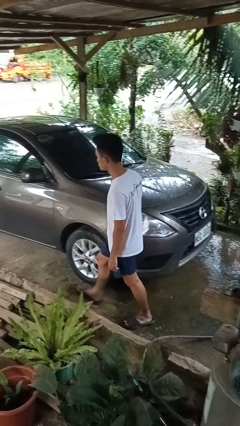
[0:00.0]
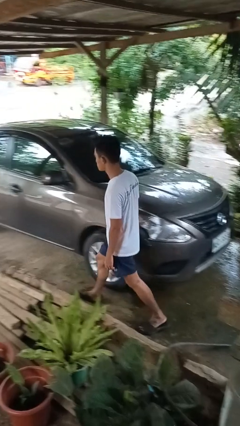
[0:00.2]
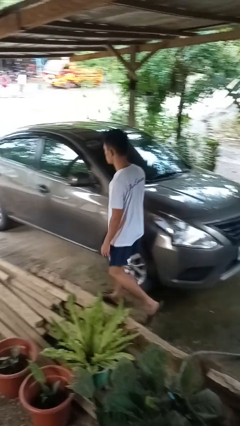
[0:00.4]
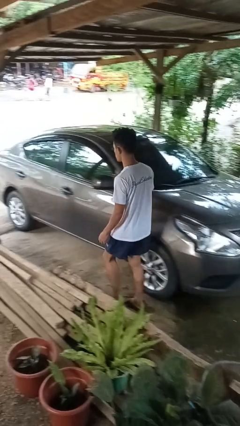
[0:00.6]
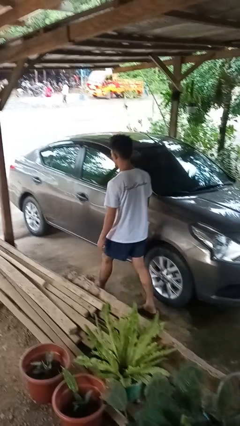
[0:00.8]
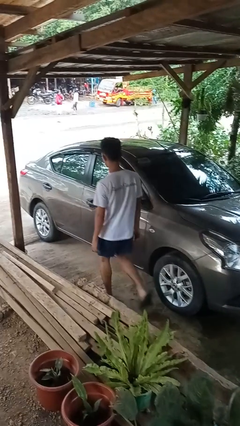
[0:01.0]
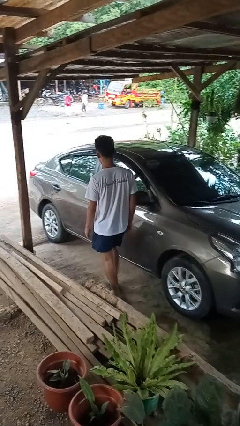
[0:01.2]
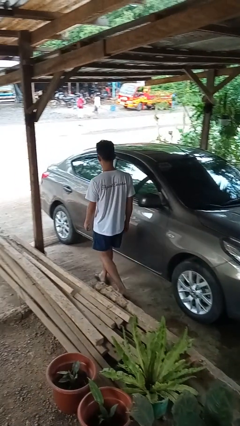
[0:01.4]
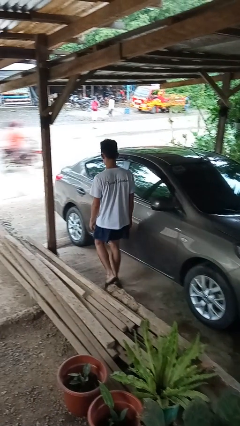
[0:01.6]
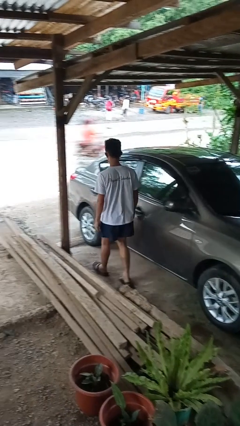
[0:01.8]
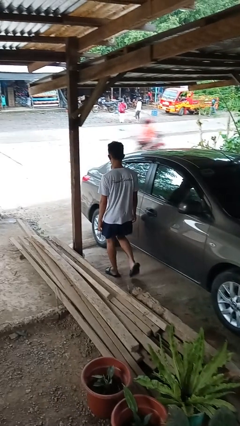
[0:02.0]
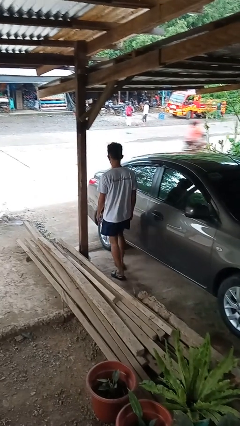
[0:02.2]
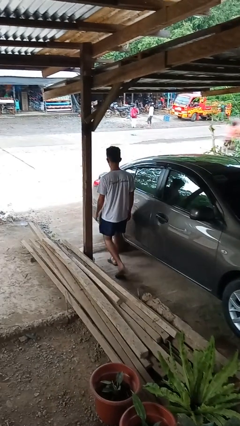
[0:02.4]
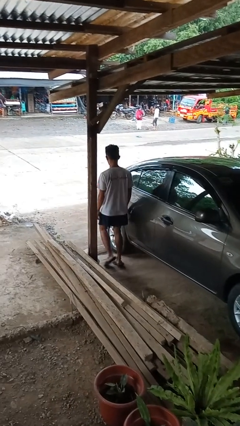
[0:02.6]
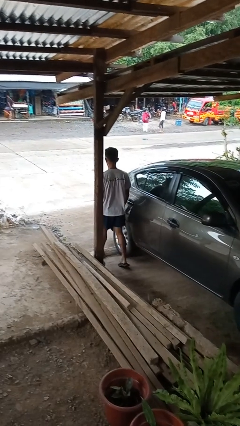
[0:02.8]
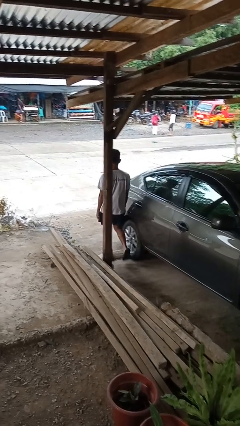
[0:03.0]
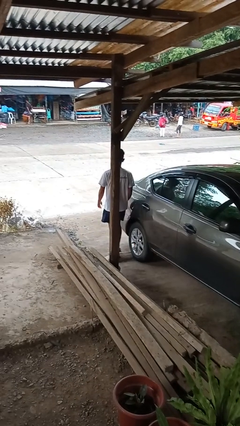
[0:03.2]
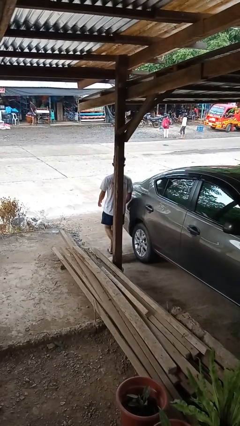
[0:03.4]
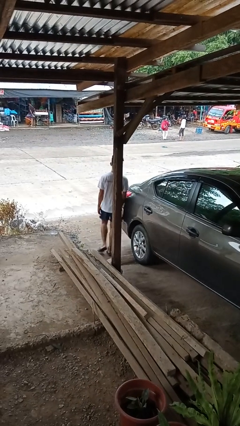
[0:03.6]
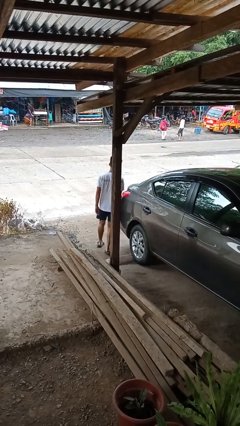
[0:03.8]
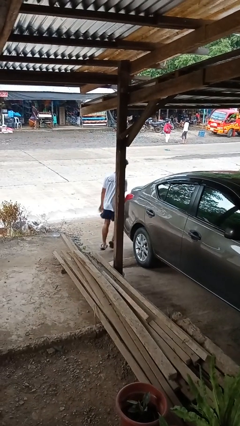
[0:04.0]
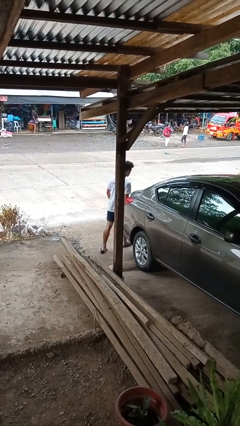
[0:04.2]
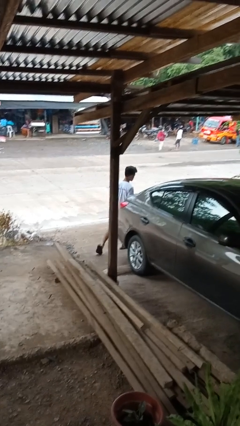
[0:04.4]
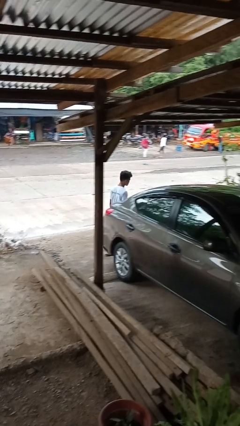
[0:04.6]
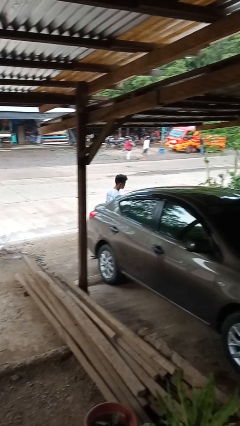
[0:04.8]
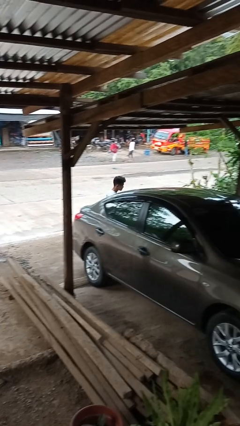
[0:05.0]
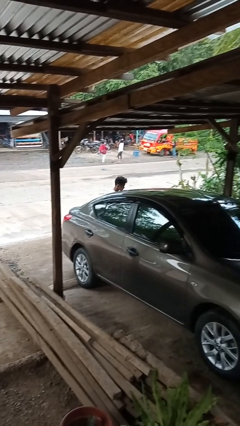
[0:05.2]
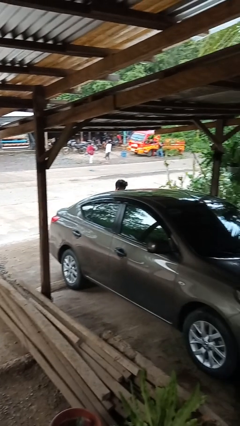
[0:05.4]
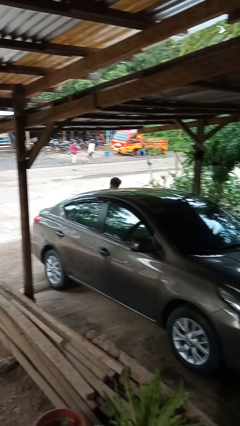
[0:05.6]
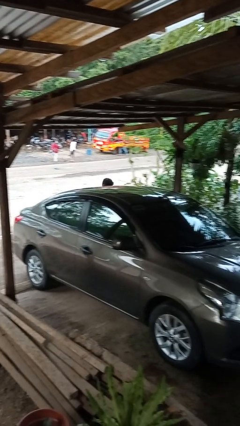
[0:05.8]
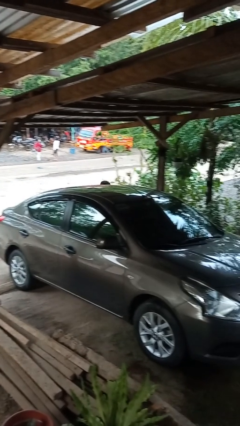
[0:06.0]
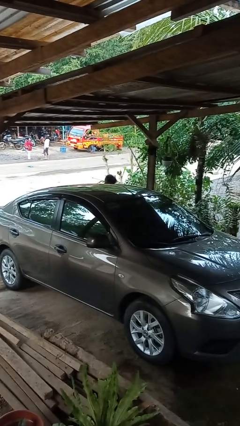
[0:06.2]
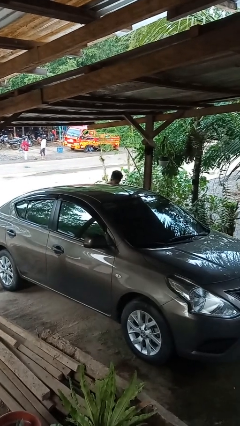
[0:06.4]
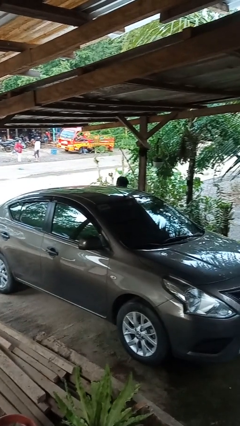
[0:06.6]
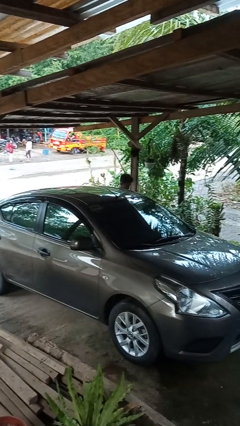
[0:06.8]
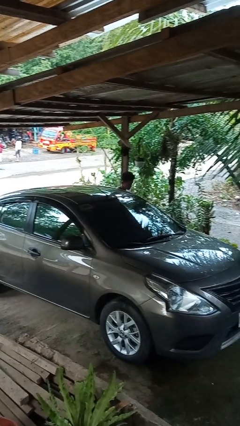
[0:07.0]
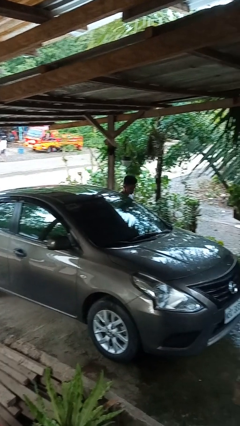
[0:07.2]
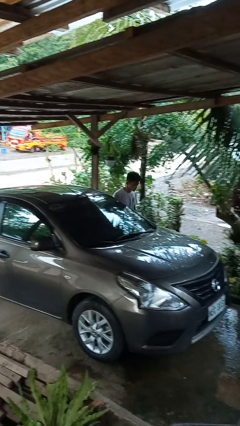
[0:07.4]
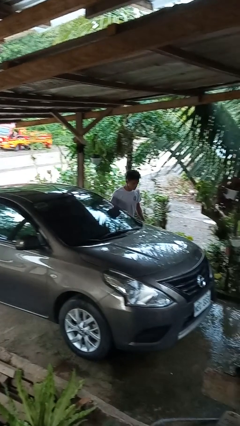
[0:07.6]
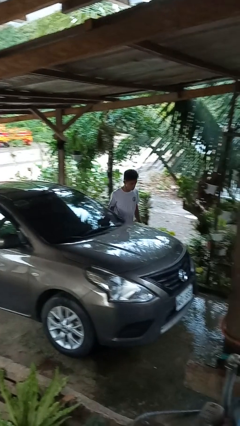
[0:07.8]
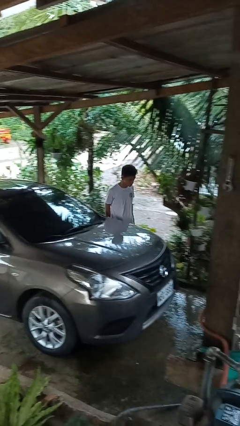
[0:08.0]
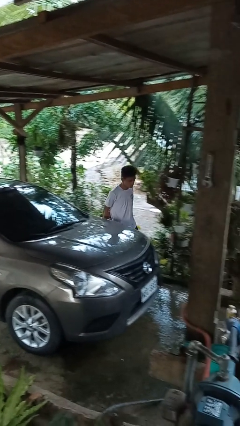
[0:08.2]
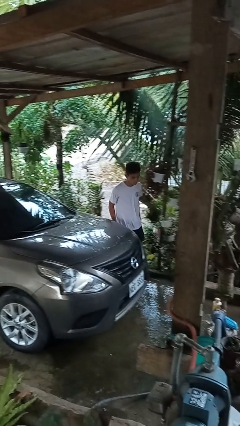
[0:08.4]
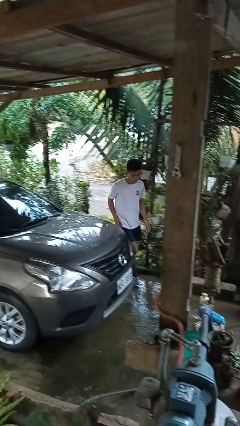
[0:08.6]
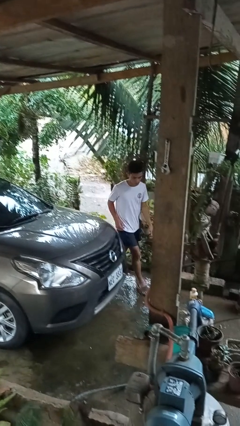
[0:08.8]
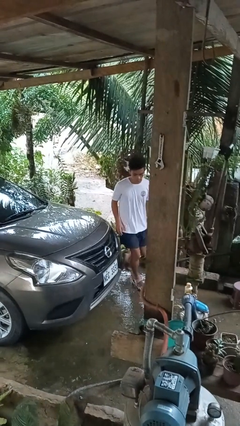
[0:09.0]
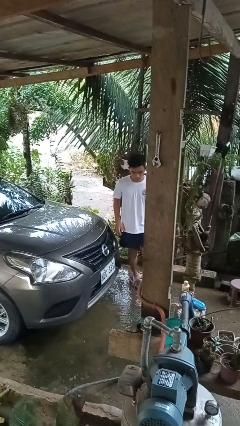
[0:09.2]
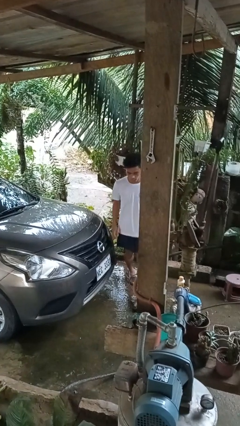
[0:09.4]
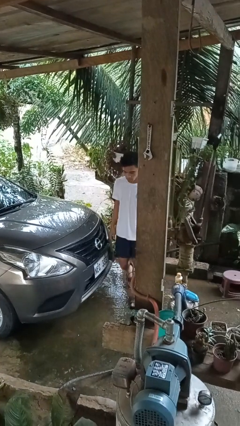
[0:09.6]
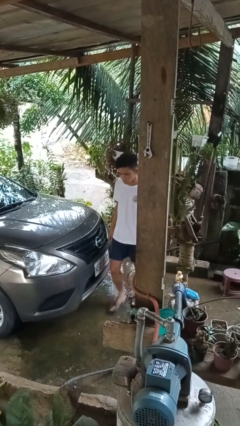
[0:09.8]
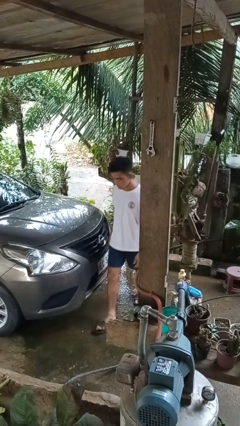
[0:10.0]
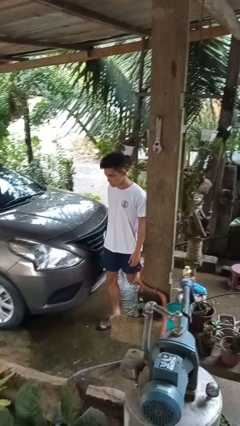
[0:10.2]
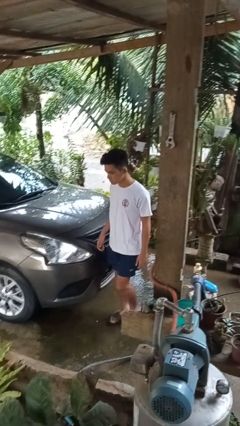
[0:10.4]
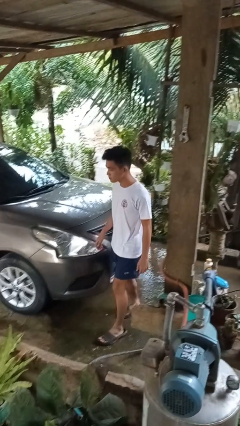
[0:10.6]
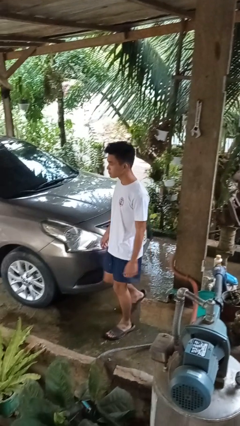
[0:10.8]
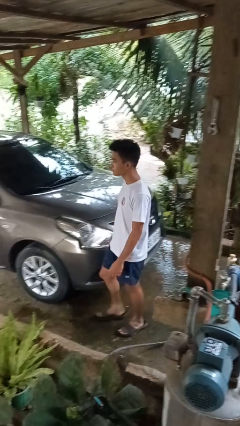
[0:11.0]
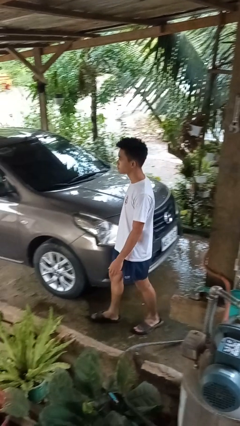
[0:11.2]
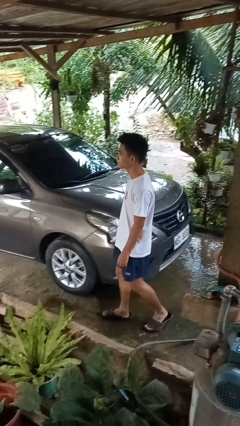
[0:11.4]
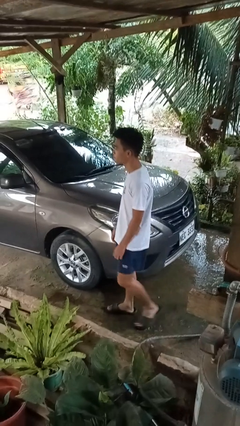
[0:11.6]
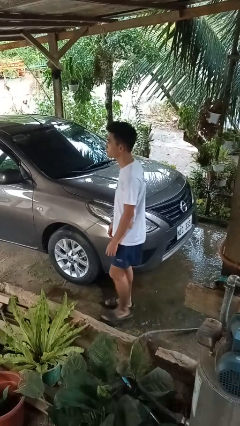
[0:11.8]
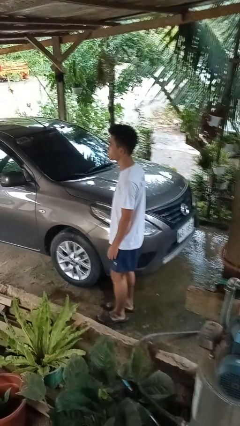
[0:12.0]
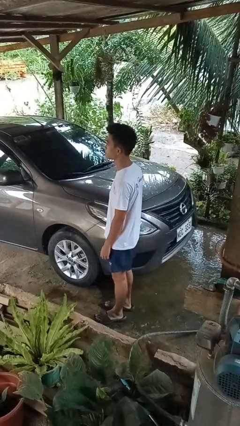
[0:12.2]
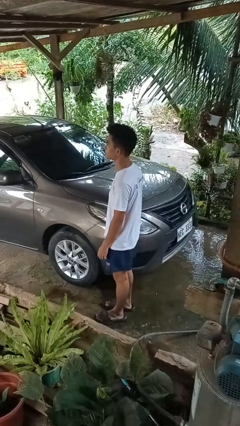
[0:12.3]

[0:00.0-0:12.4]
person walks around car

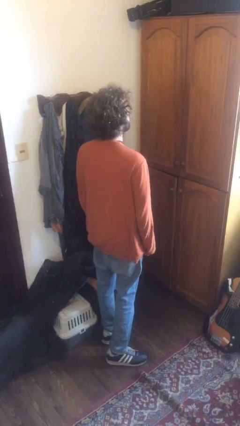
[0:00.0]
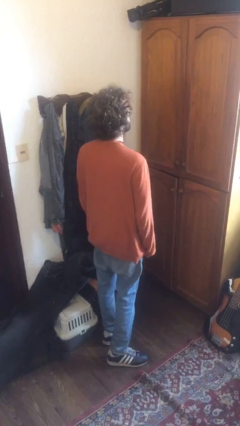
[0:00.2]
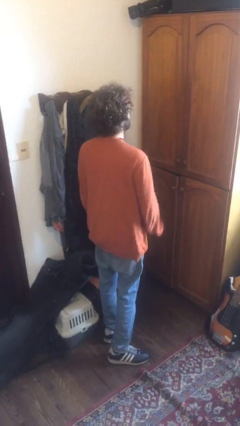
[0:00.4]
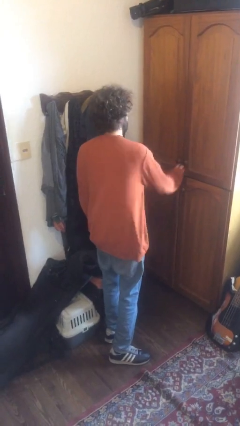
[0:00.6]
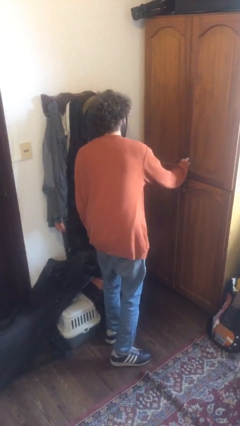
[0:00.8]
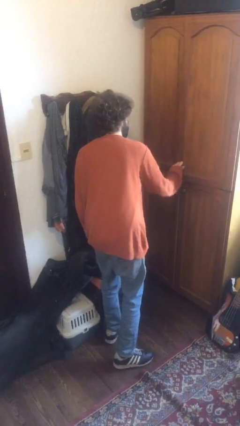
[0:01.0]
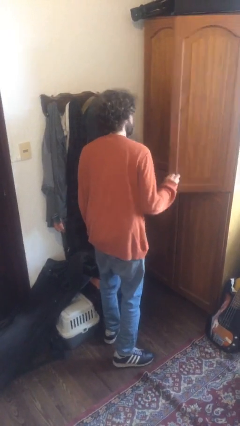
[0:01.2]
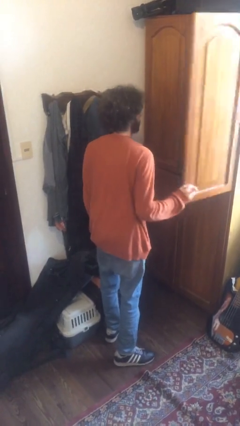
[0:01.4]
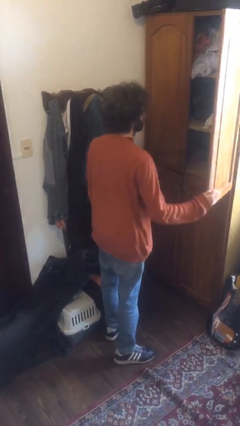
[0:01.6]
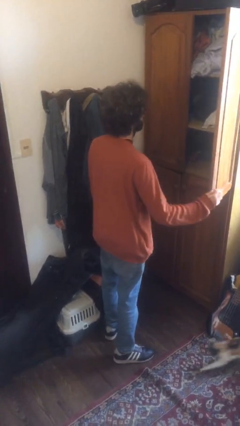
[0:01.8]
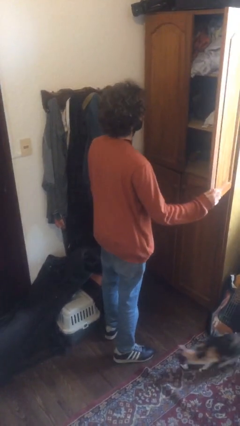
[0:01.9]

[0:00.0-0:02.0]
person opens dresser drawer

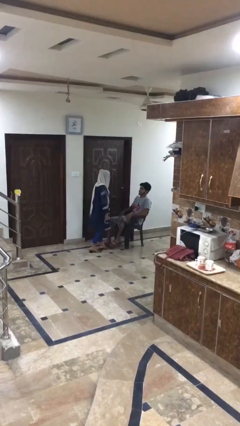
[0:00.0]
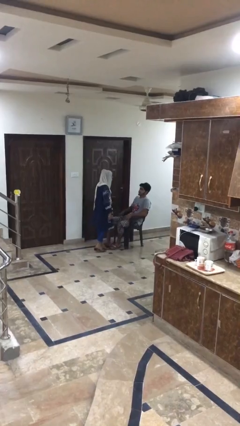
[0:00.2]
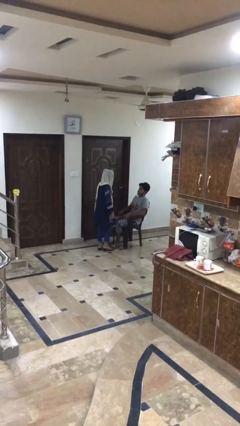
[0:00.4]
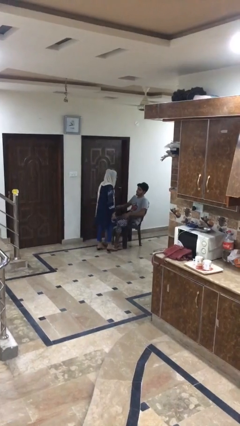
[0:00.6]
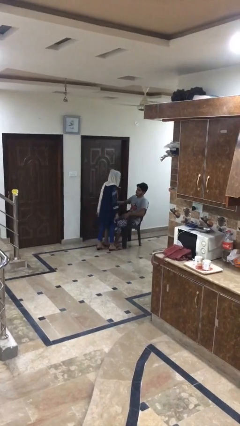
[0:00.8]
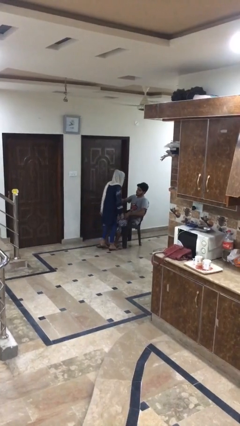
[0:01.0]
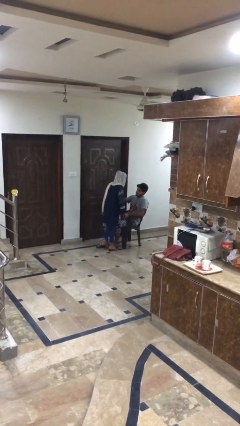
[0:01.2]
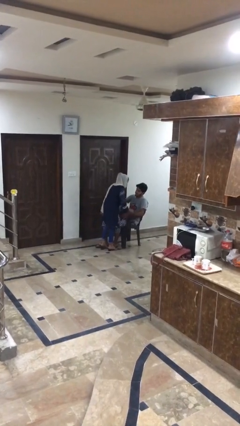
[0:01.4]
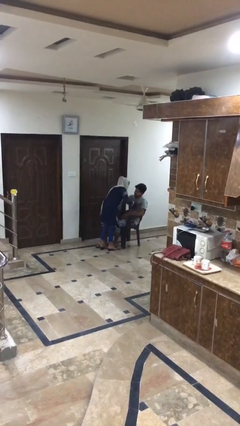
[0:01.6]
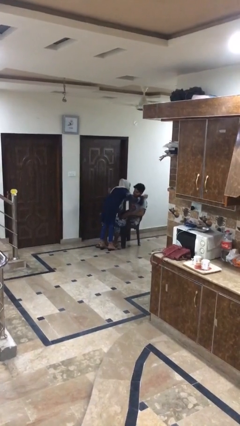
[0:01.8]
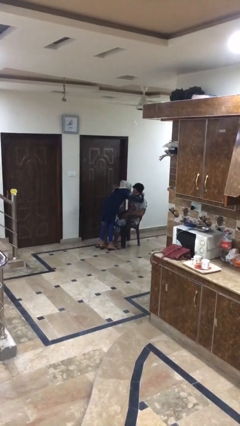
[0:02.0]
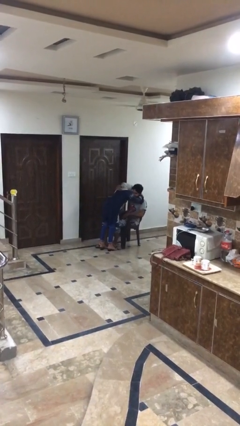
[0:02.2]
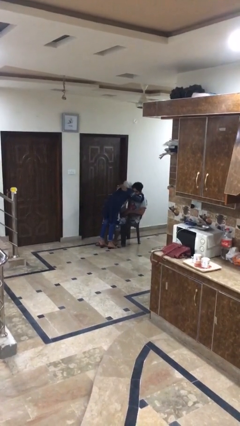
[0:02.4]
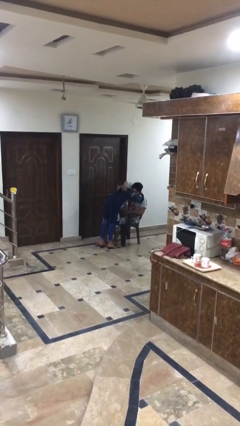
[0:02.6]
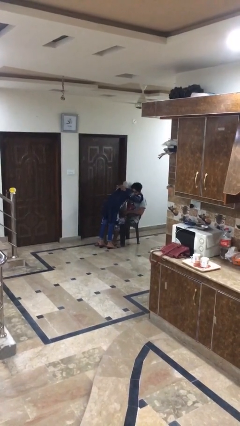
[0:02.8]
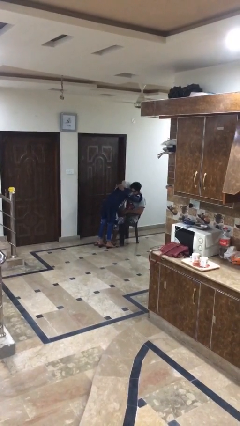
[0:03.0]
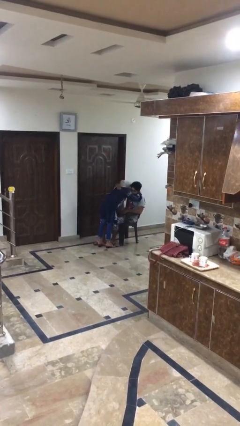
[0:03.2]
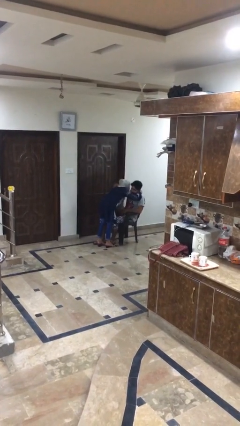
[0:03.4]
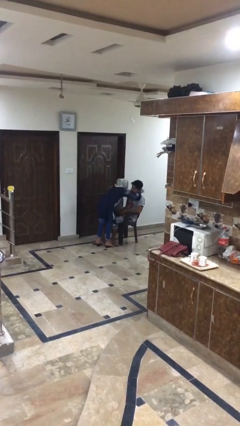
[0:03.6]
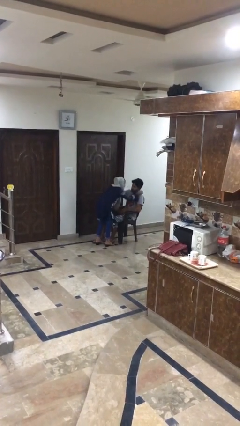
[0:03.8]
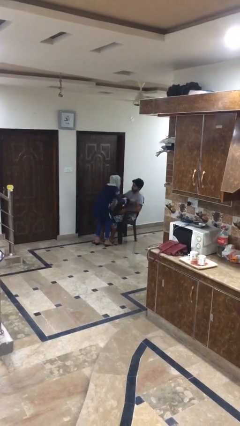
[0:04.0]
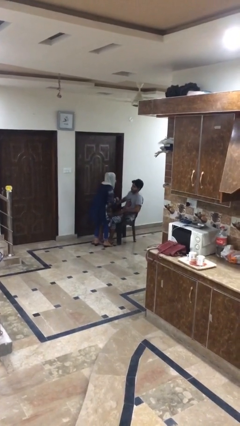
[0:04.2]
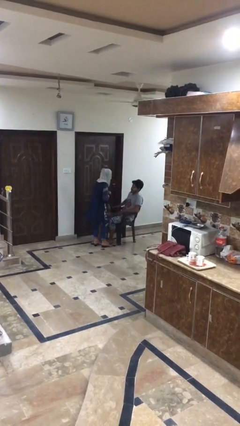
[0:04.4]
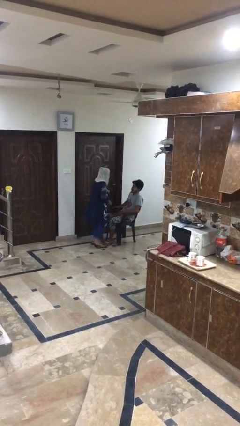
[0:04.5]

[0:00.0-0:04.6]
person embraces person
